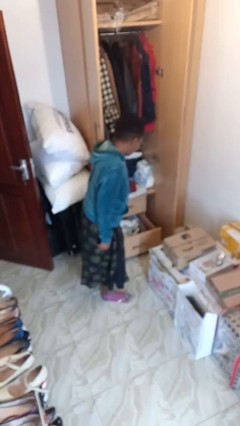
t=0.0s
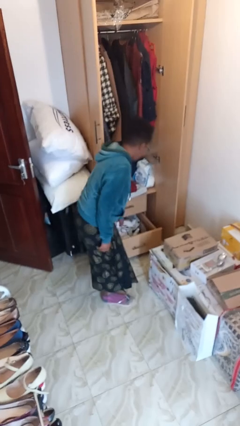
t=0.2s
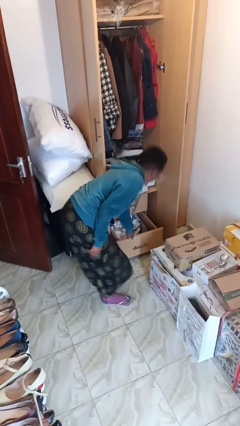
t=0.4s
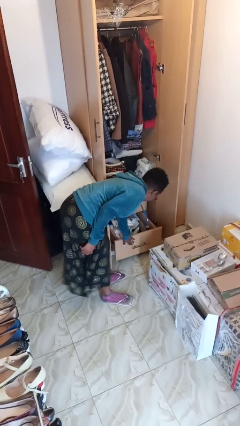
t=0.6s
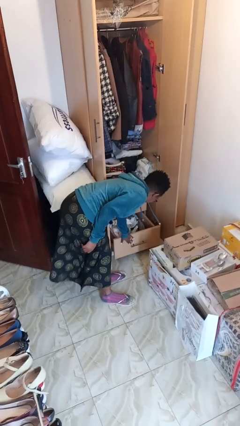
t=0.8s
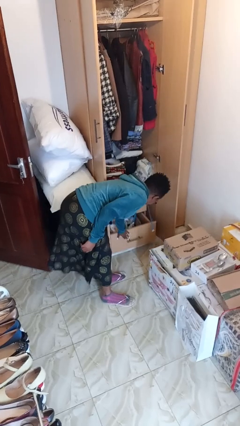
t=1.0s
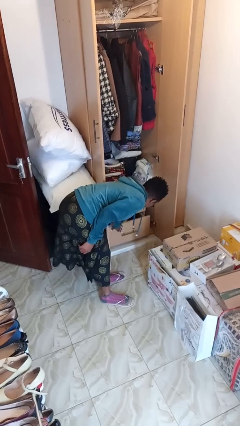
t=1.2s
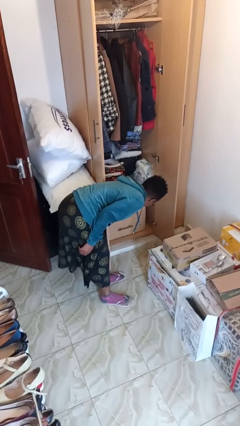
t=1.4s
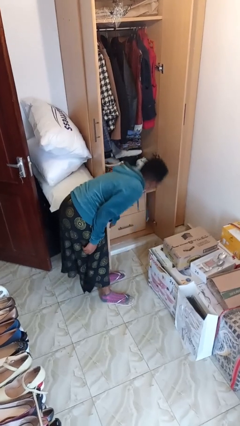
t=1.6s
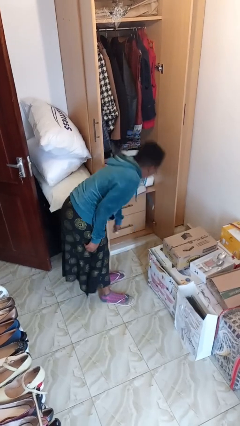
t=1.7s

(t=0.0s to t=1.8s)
person closes dresser drawer

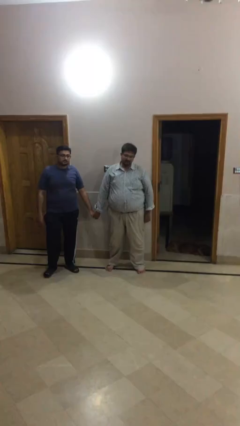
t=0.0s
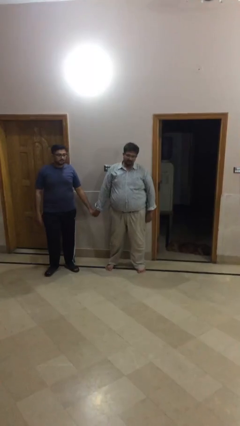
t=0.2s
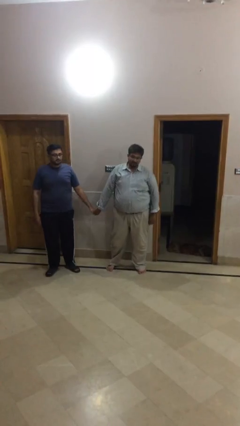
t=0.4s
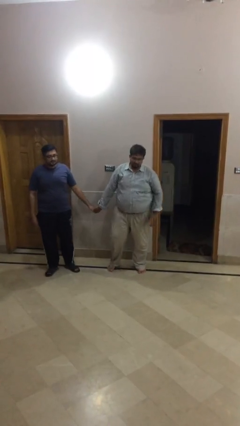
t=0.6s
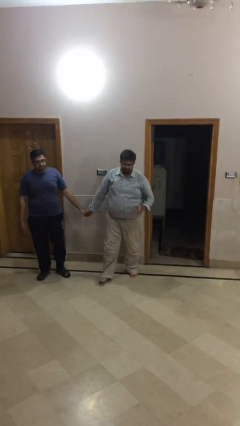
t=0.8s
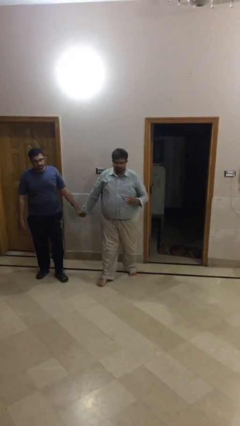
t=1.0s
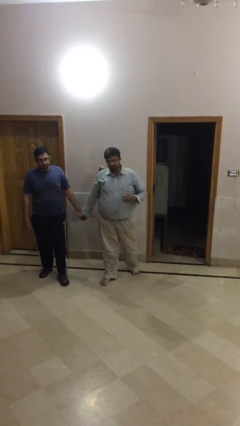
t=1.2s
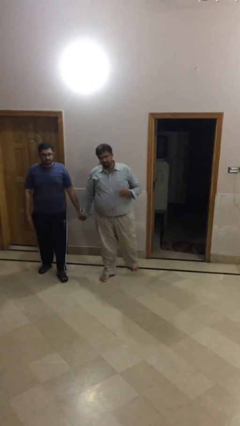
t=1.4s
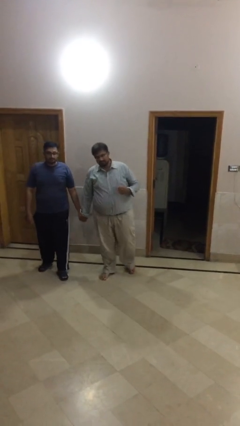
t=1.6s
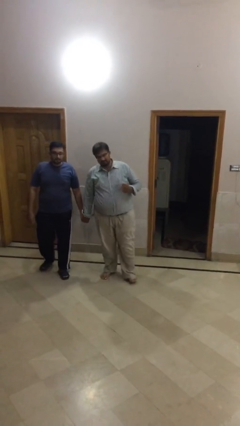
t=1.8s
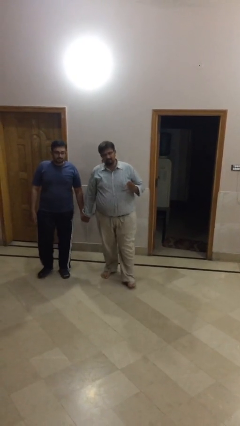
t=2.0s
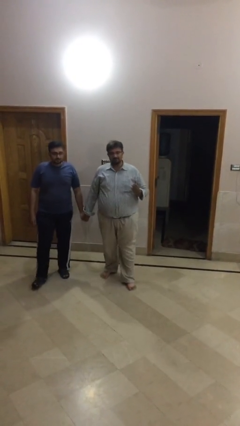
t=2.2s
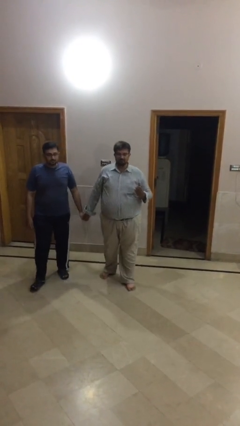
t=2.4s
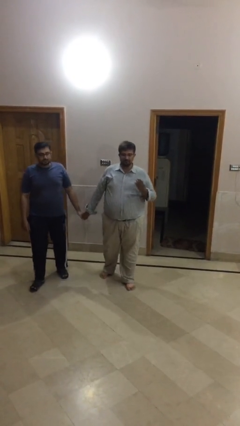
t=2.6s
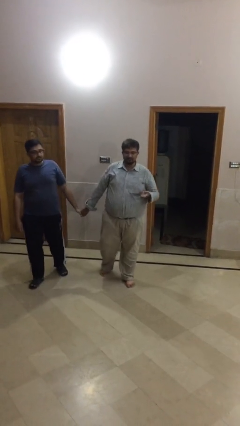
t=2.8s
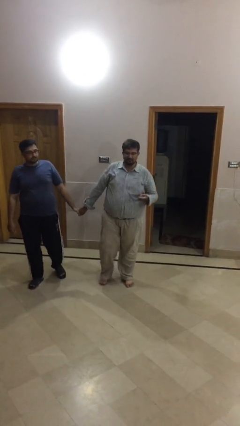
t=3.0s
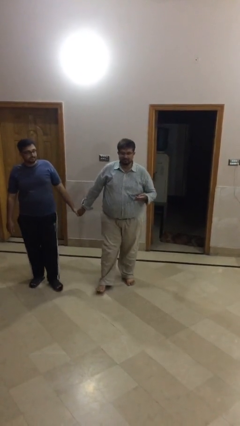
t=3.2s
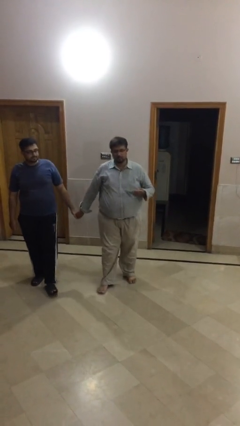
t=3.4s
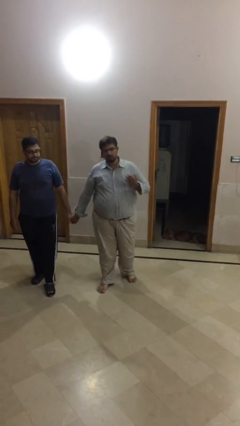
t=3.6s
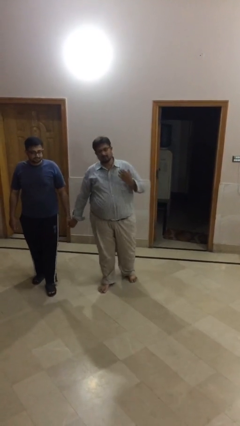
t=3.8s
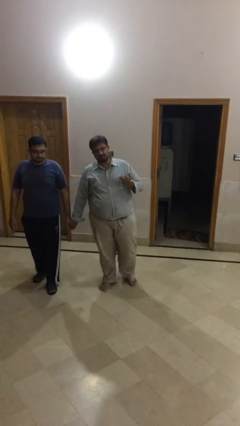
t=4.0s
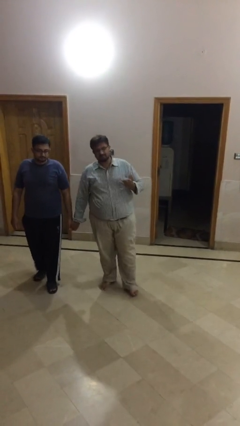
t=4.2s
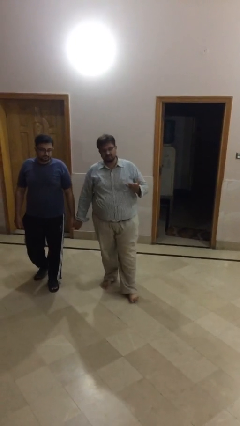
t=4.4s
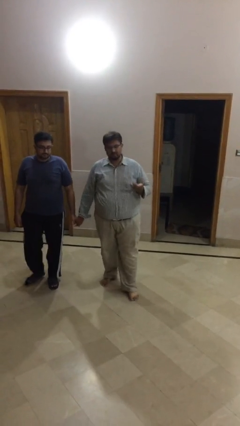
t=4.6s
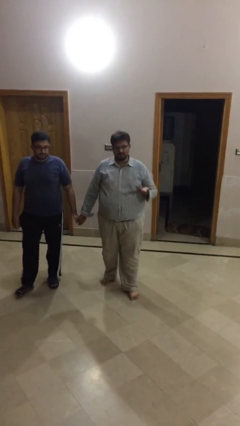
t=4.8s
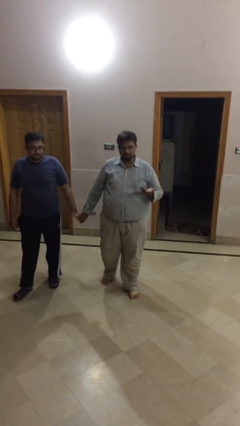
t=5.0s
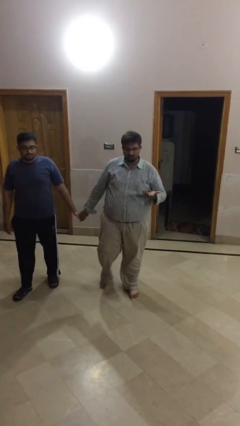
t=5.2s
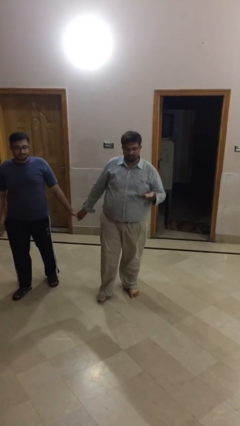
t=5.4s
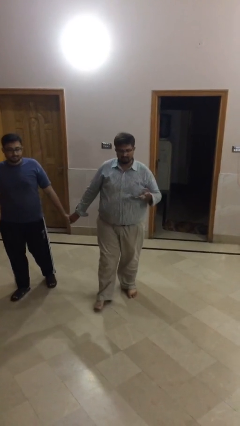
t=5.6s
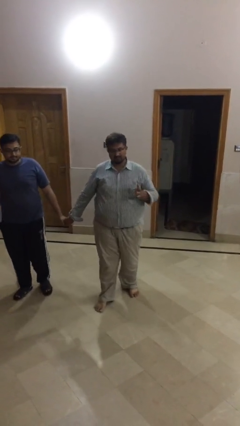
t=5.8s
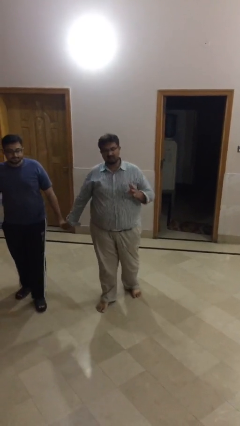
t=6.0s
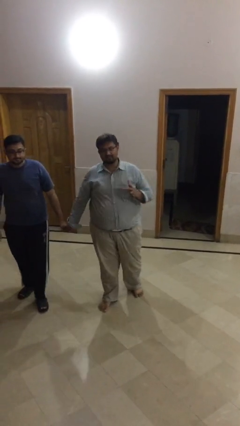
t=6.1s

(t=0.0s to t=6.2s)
person holds hand

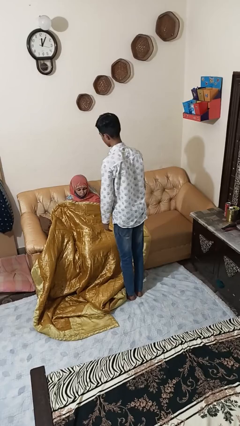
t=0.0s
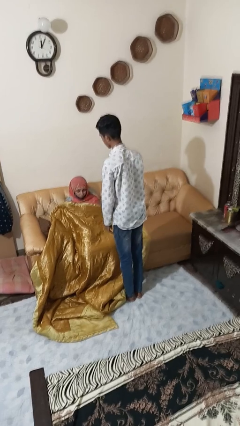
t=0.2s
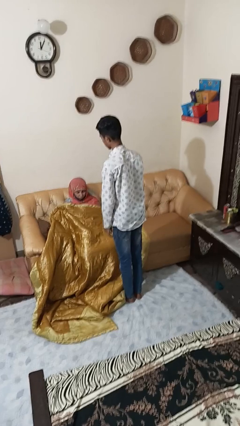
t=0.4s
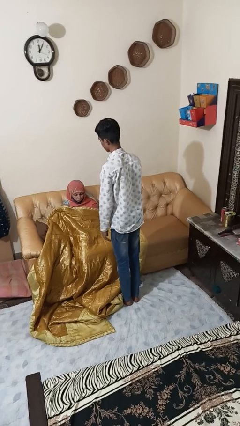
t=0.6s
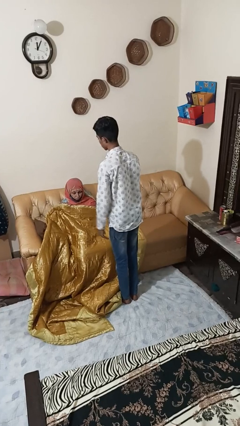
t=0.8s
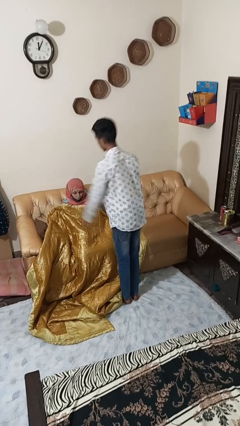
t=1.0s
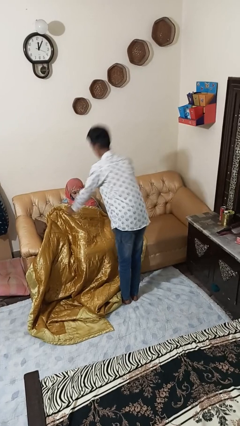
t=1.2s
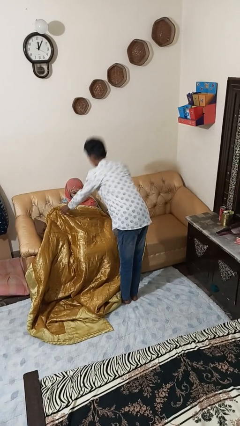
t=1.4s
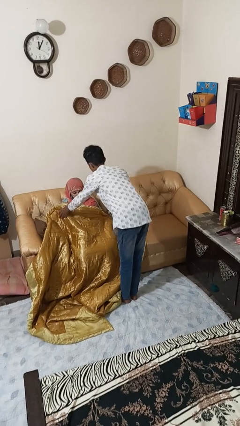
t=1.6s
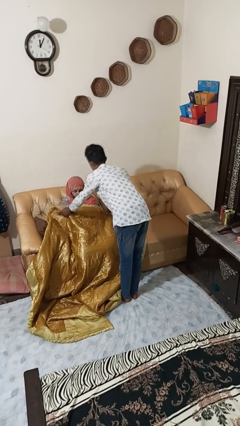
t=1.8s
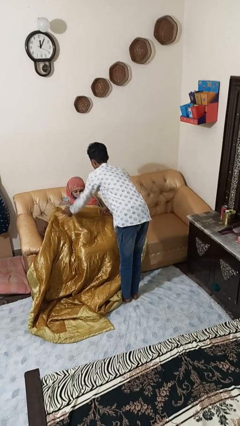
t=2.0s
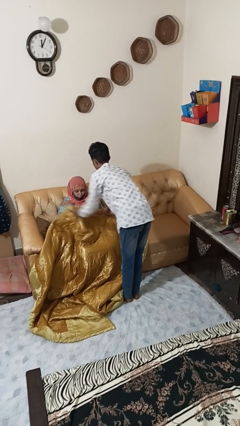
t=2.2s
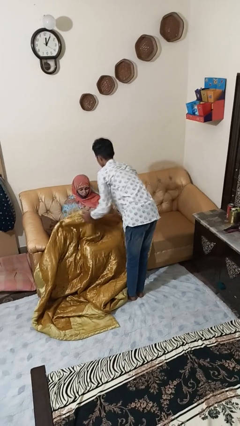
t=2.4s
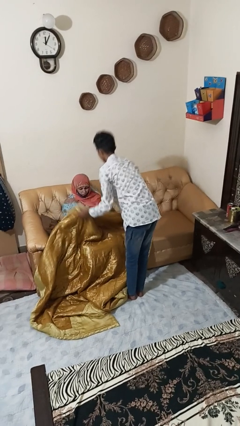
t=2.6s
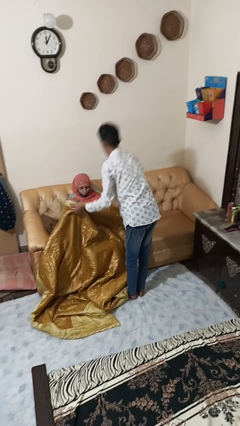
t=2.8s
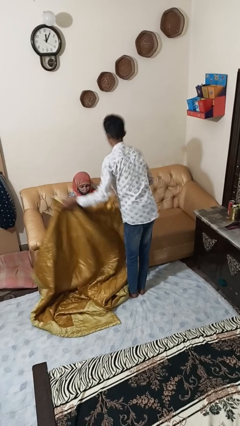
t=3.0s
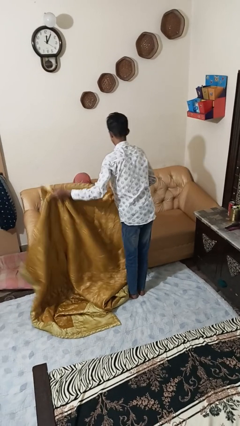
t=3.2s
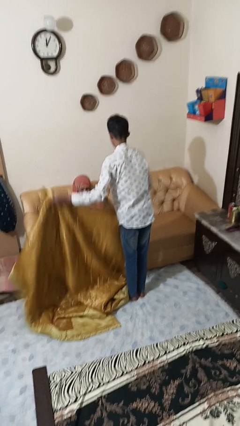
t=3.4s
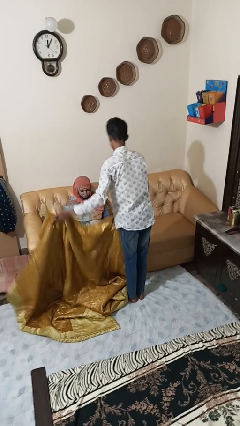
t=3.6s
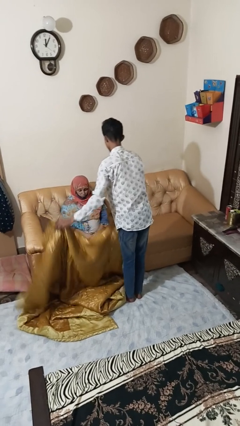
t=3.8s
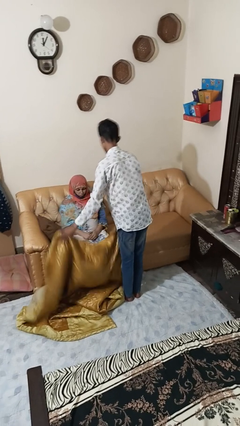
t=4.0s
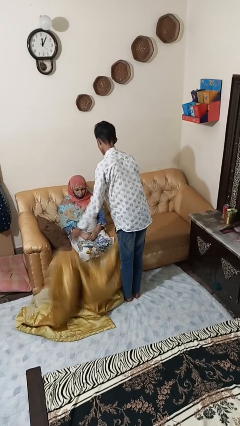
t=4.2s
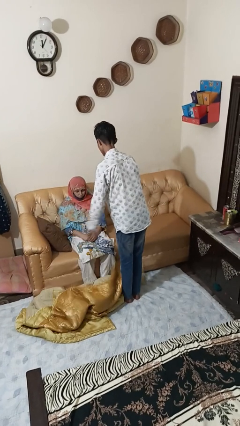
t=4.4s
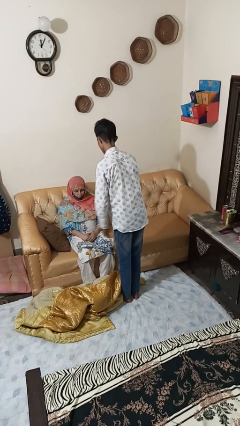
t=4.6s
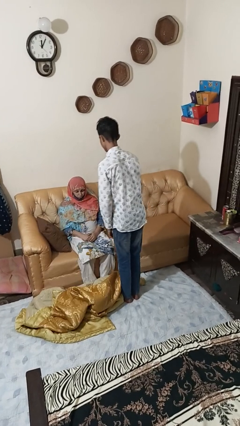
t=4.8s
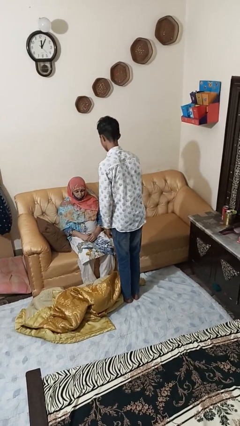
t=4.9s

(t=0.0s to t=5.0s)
person uncovers friend with blanket

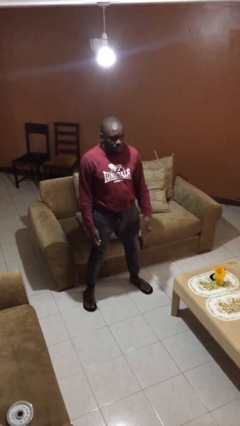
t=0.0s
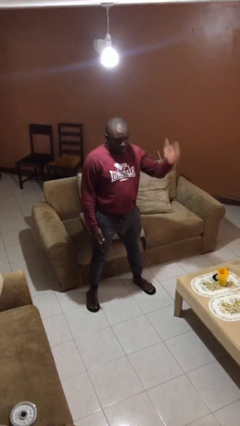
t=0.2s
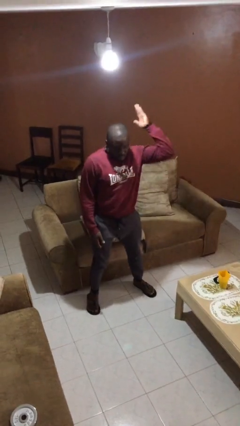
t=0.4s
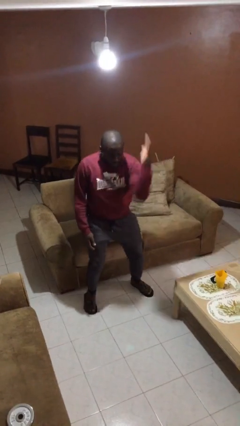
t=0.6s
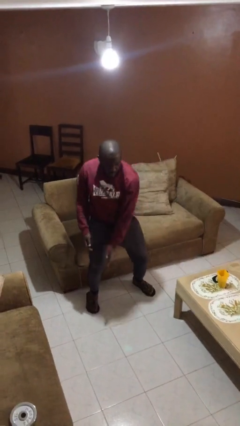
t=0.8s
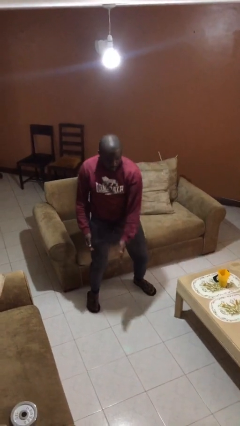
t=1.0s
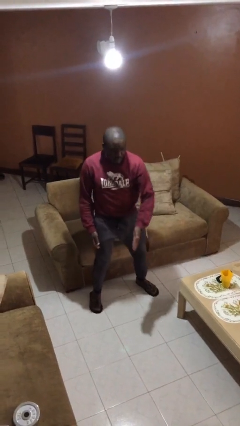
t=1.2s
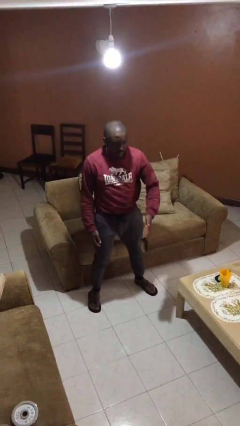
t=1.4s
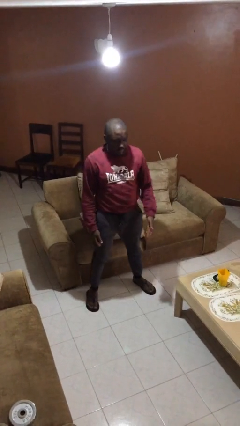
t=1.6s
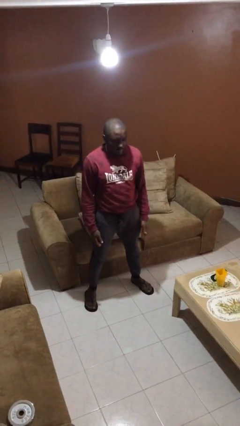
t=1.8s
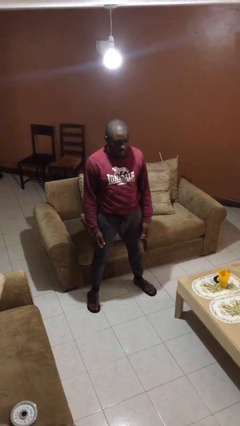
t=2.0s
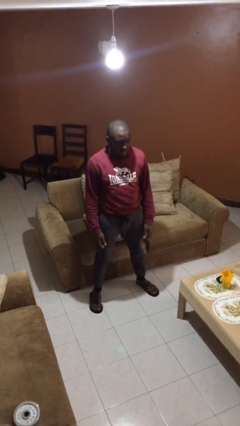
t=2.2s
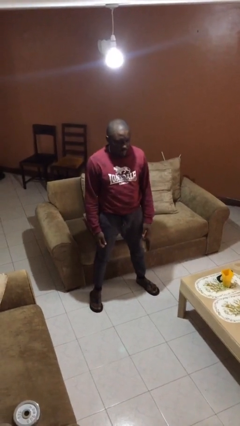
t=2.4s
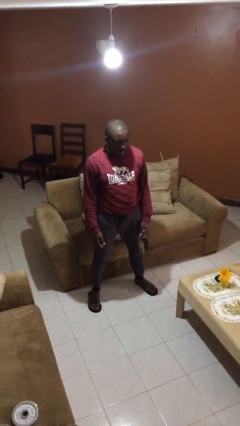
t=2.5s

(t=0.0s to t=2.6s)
person karate chop

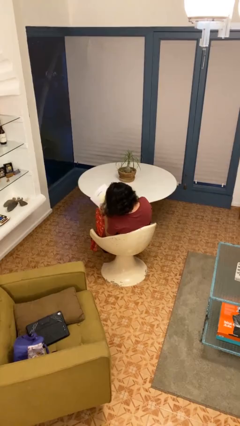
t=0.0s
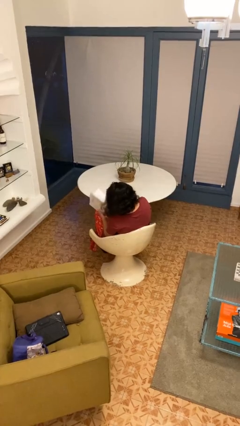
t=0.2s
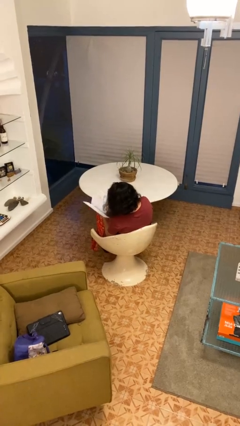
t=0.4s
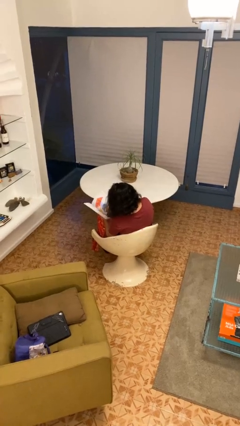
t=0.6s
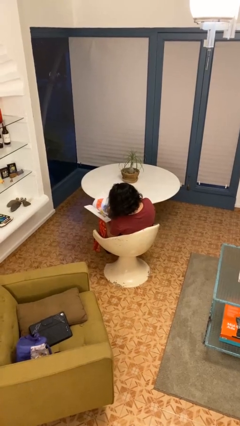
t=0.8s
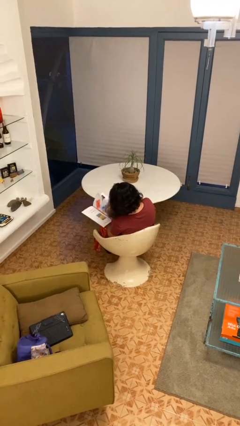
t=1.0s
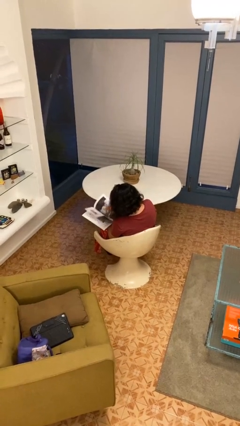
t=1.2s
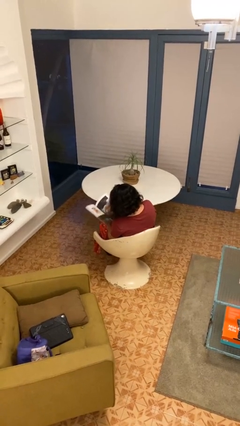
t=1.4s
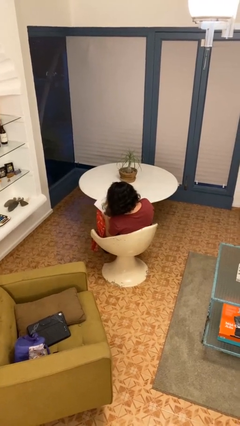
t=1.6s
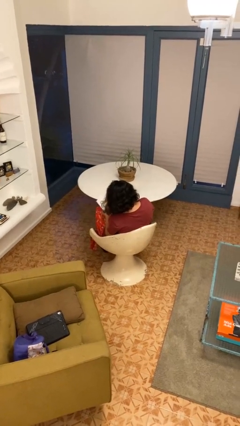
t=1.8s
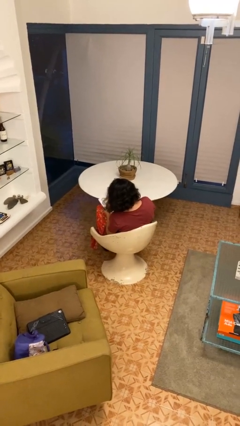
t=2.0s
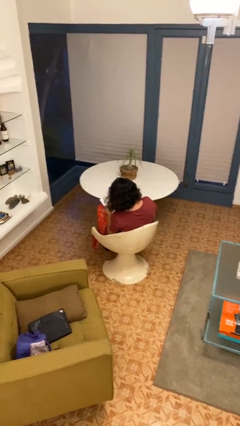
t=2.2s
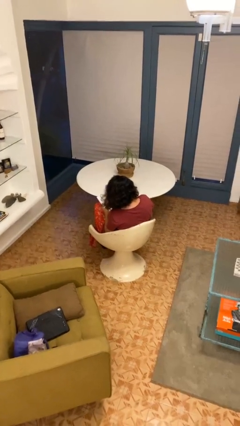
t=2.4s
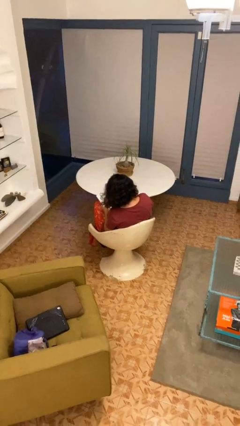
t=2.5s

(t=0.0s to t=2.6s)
person reads magazine
